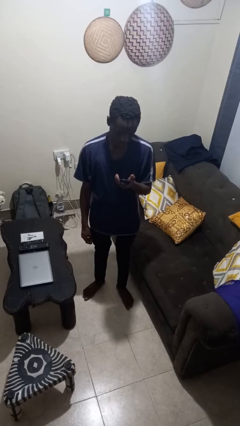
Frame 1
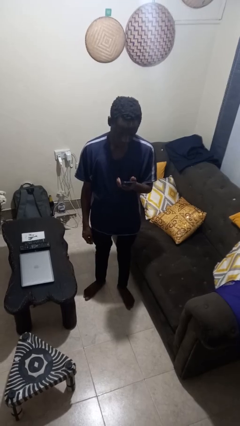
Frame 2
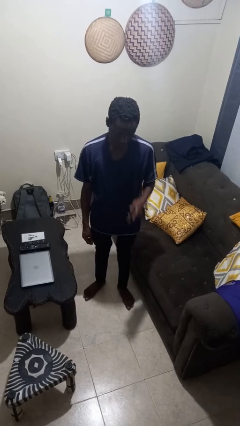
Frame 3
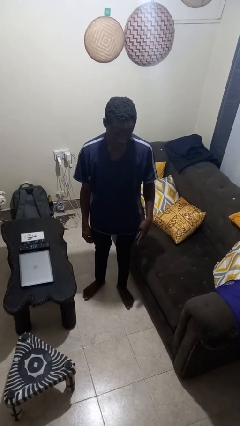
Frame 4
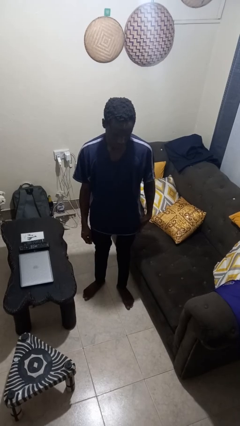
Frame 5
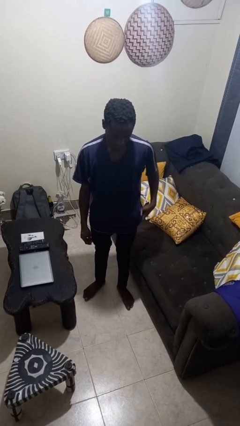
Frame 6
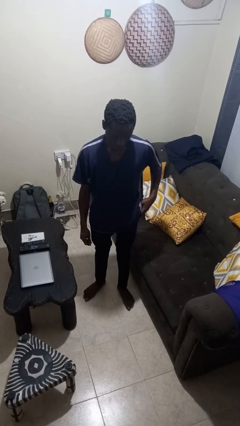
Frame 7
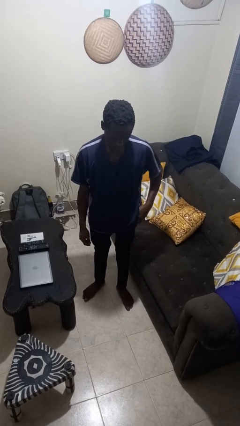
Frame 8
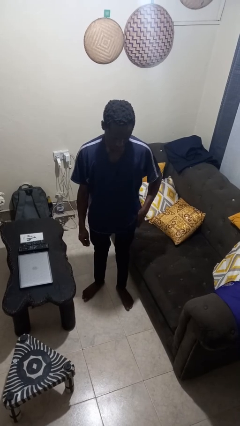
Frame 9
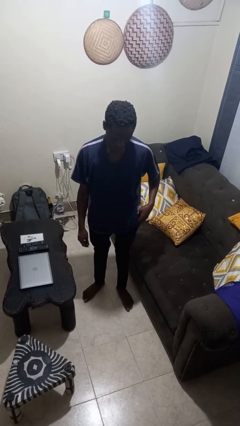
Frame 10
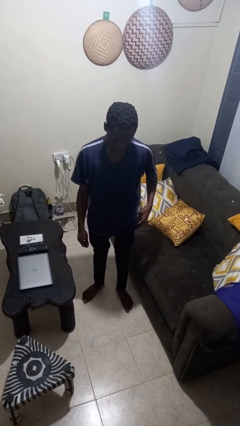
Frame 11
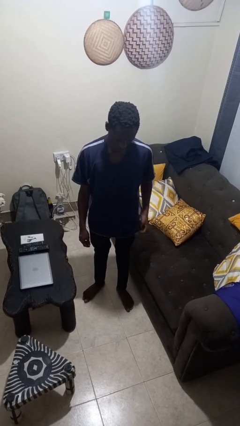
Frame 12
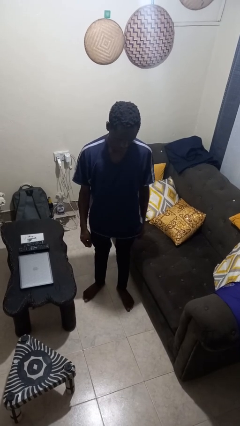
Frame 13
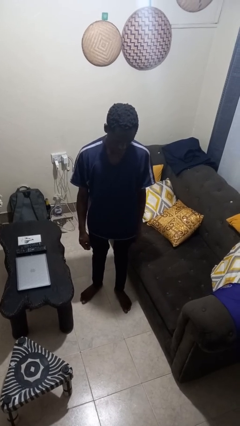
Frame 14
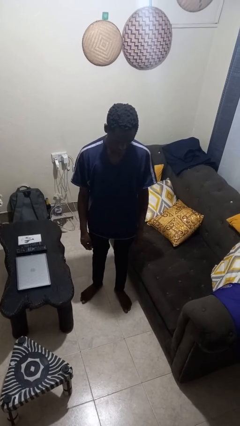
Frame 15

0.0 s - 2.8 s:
person puts phone into pocket

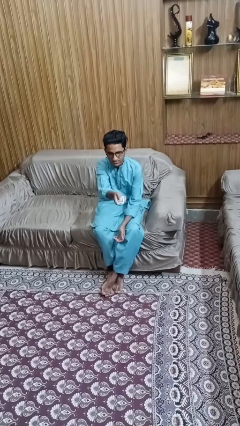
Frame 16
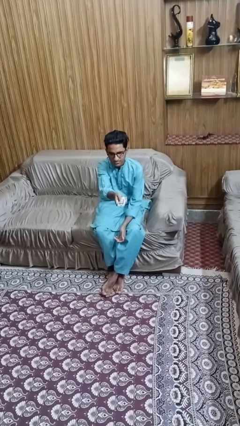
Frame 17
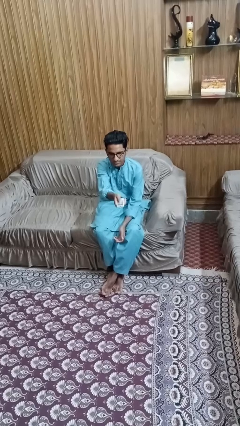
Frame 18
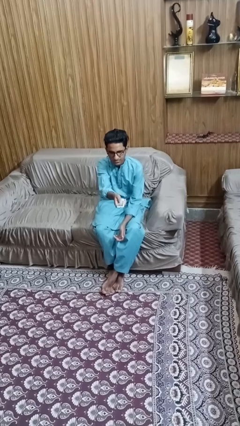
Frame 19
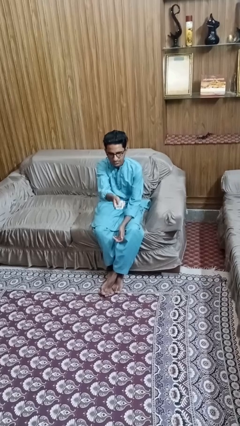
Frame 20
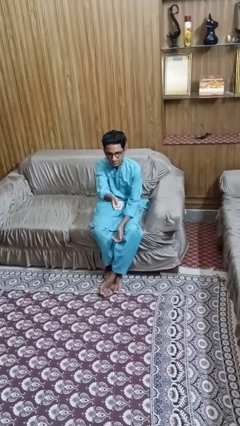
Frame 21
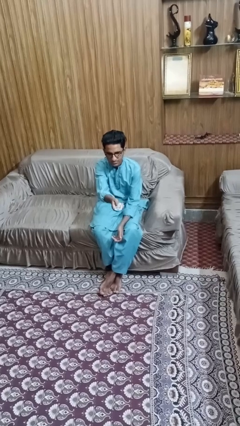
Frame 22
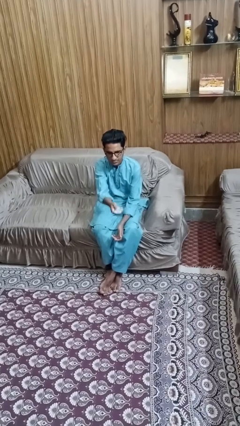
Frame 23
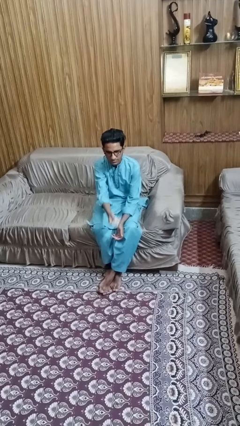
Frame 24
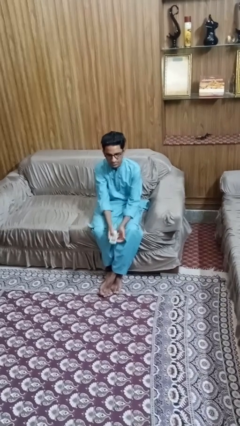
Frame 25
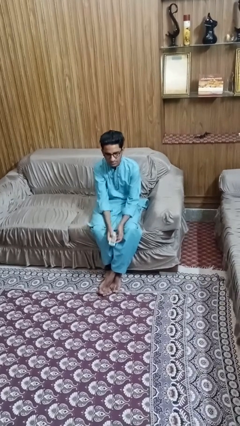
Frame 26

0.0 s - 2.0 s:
person uses television remote

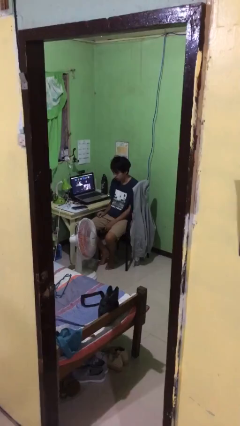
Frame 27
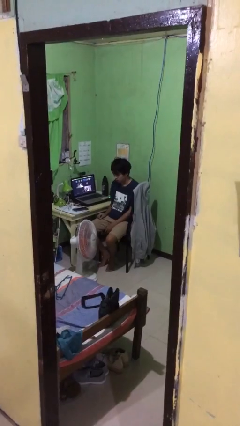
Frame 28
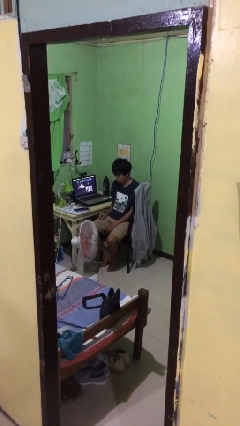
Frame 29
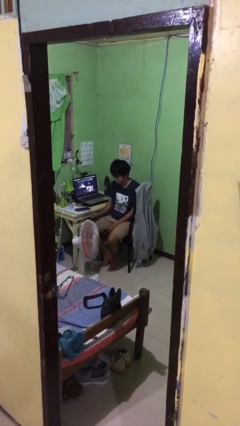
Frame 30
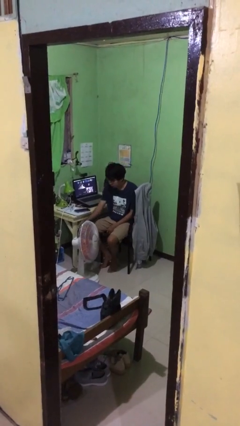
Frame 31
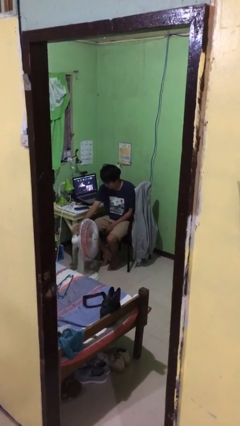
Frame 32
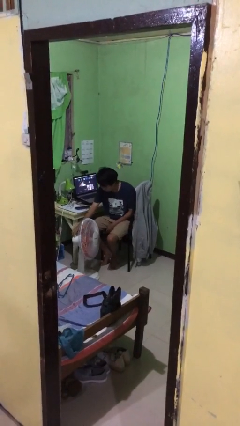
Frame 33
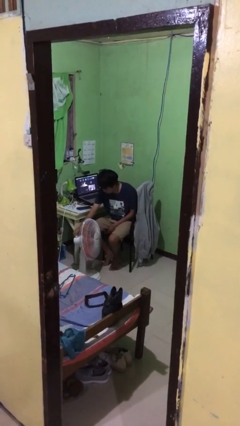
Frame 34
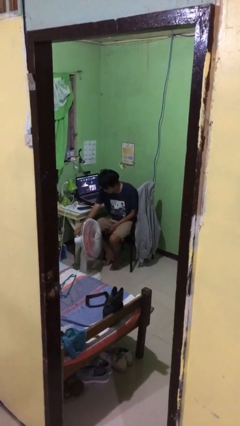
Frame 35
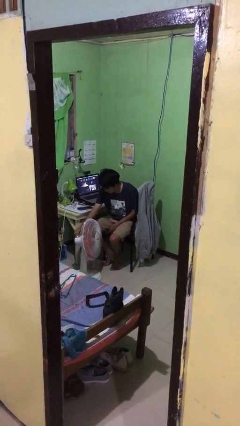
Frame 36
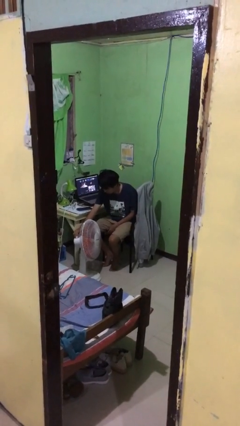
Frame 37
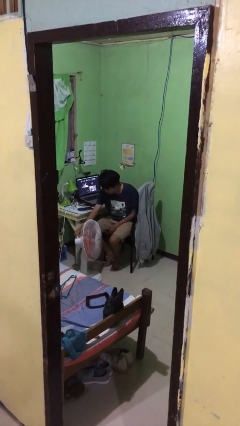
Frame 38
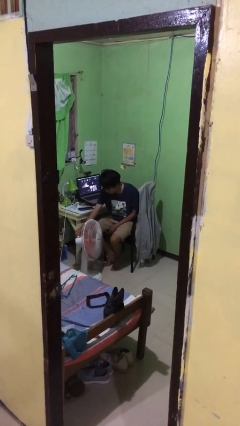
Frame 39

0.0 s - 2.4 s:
person turns on fan

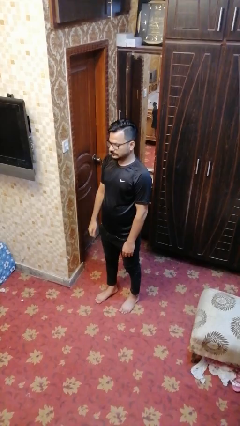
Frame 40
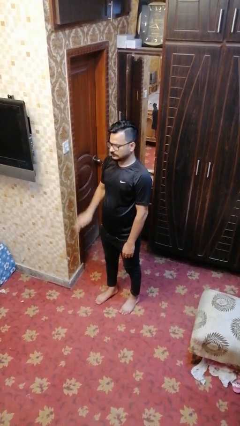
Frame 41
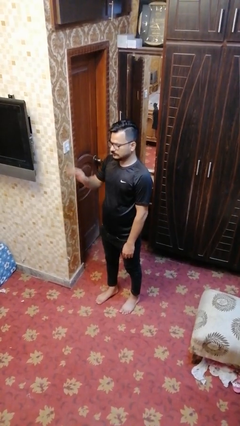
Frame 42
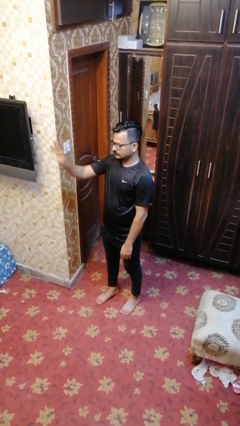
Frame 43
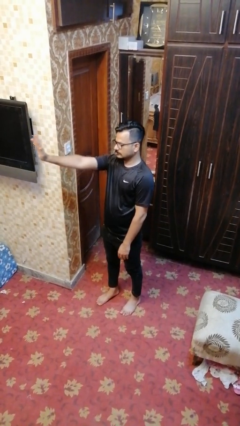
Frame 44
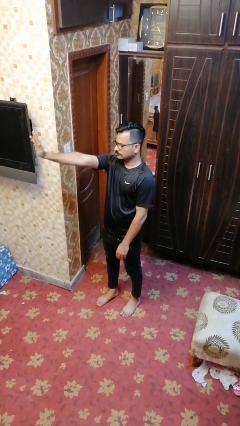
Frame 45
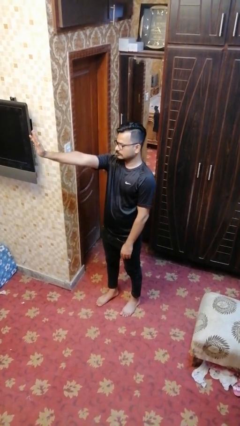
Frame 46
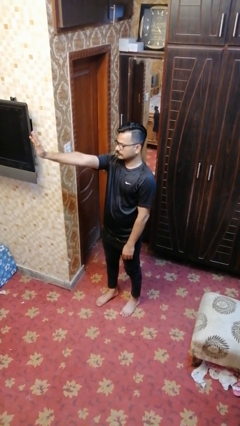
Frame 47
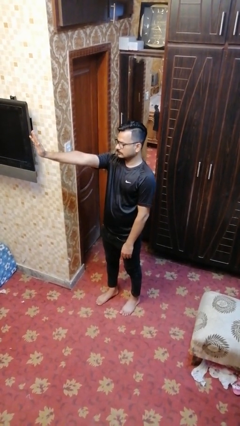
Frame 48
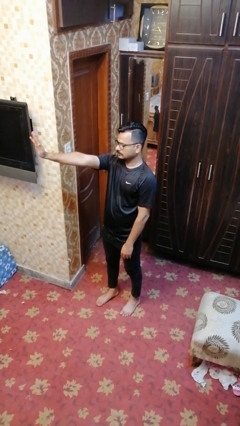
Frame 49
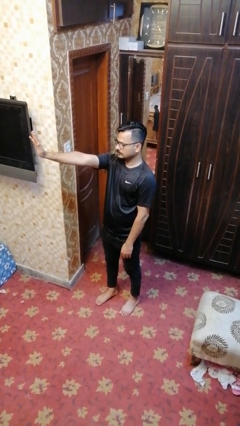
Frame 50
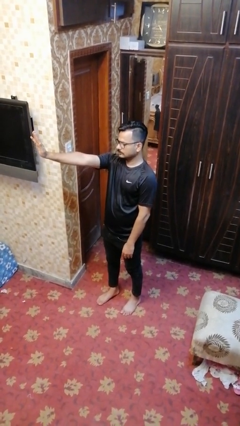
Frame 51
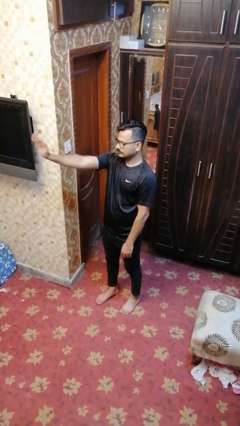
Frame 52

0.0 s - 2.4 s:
person gestures stop

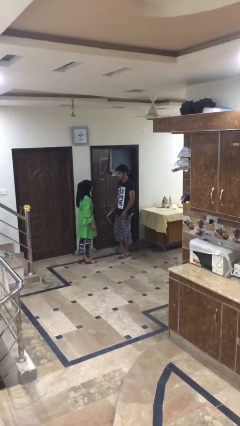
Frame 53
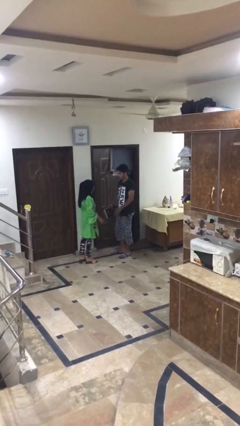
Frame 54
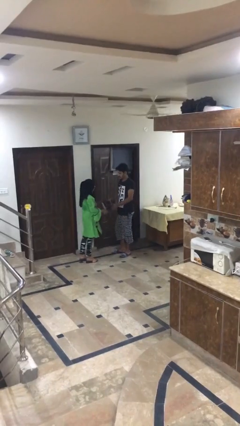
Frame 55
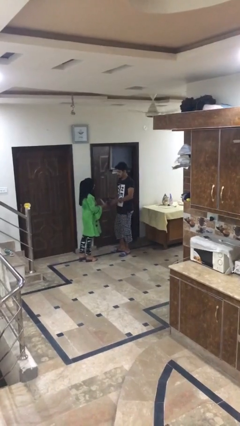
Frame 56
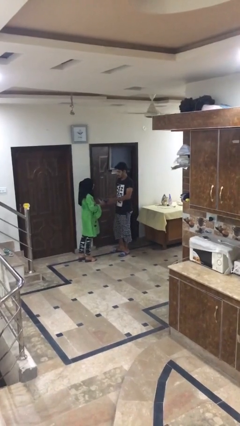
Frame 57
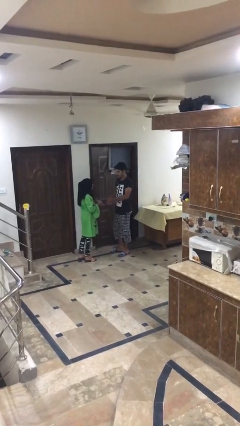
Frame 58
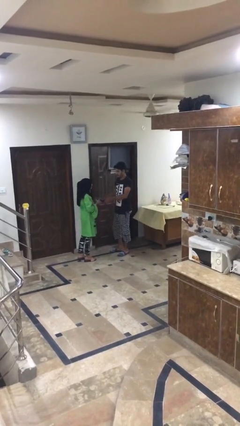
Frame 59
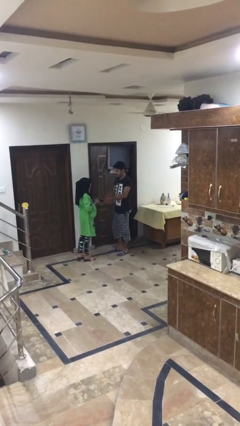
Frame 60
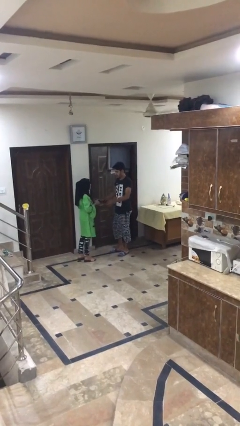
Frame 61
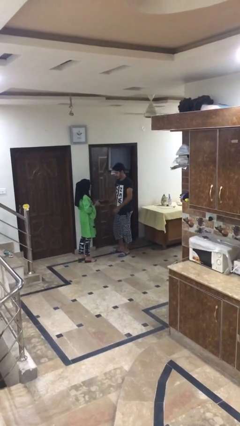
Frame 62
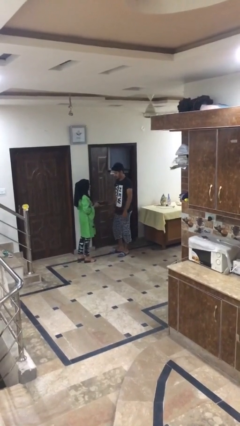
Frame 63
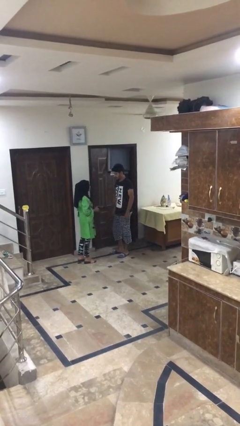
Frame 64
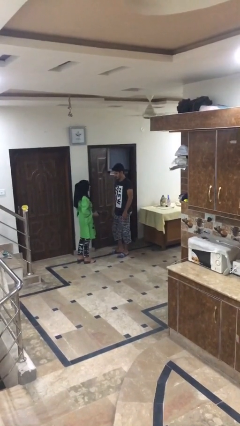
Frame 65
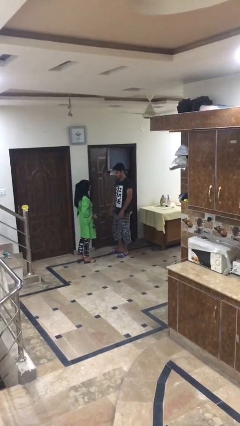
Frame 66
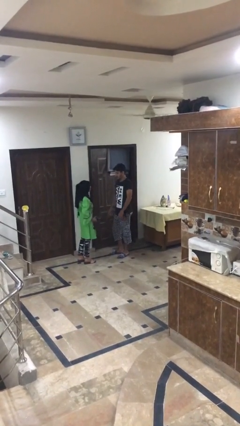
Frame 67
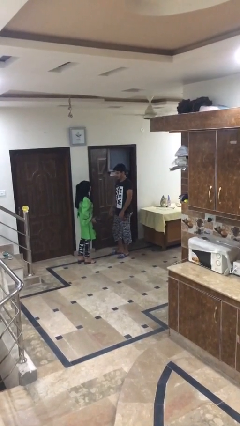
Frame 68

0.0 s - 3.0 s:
person transfers object to person

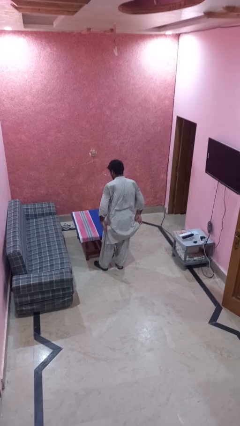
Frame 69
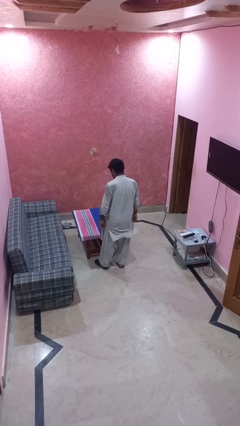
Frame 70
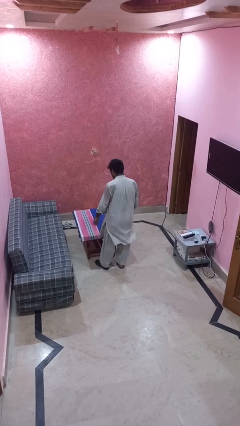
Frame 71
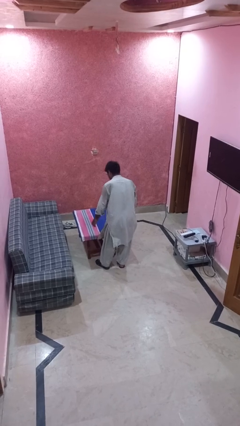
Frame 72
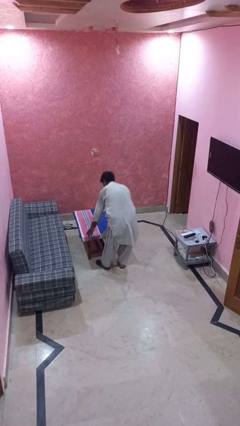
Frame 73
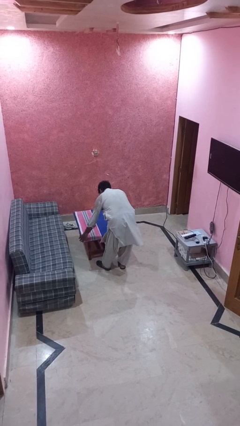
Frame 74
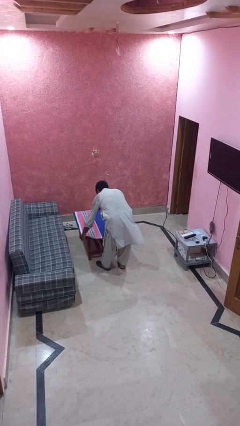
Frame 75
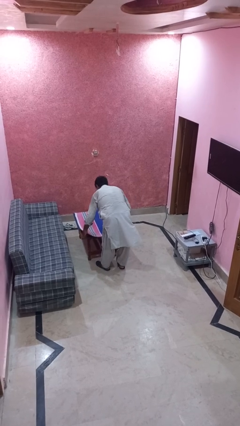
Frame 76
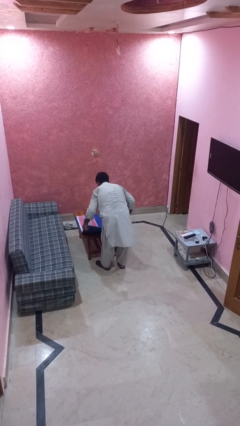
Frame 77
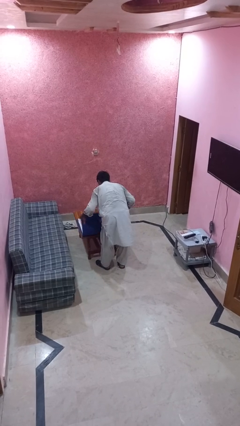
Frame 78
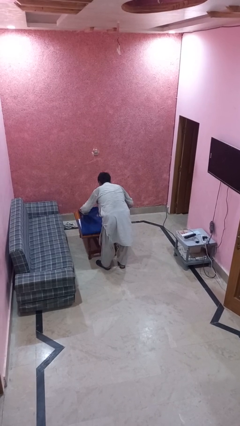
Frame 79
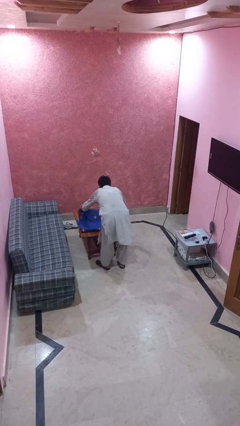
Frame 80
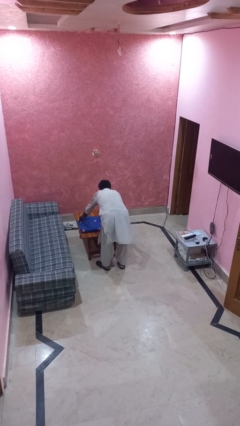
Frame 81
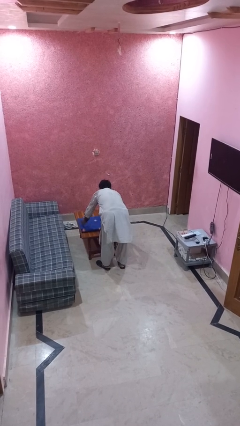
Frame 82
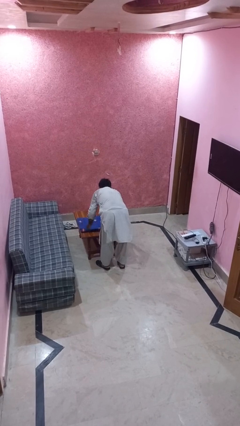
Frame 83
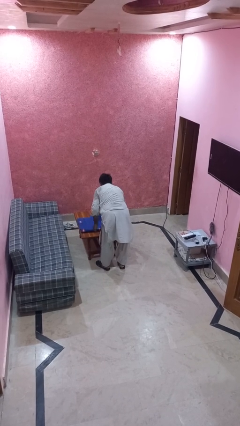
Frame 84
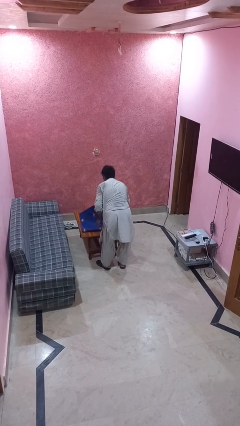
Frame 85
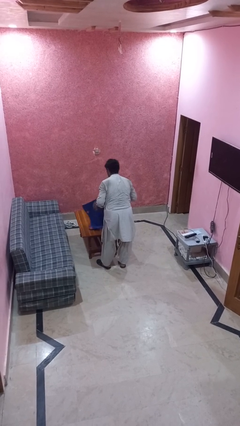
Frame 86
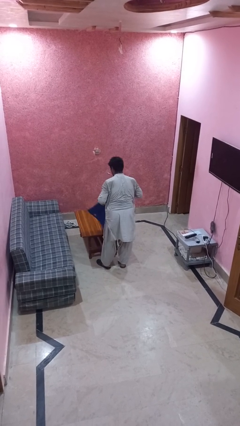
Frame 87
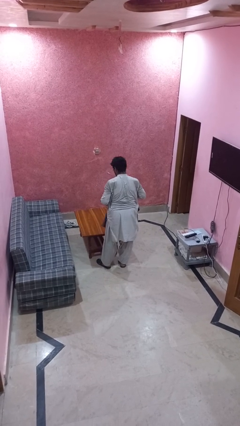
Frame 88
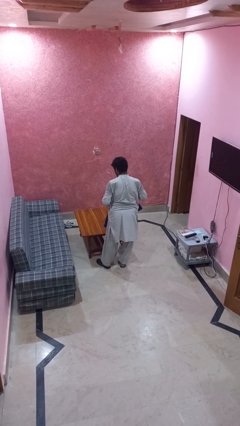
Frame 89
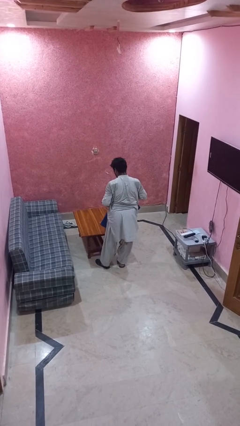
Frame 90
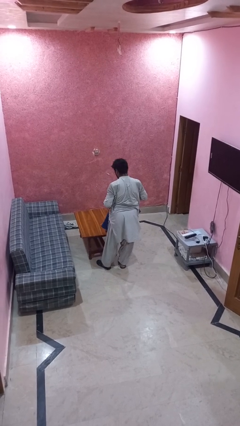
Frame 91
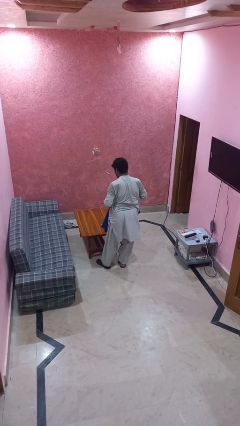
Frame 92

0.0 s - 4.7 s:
person folds tablecloth

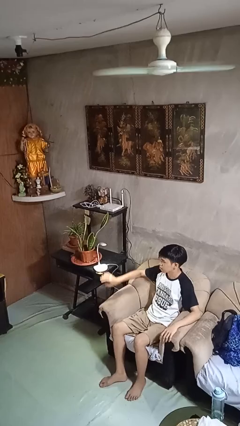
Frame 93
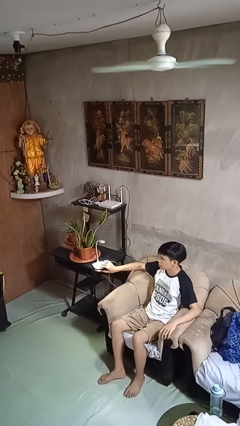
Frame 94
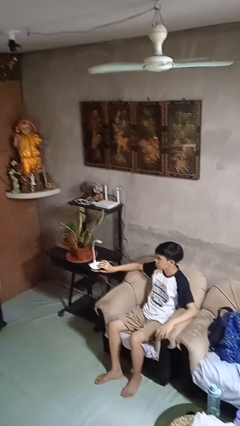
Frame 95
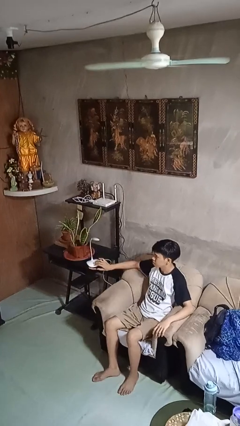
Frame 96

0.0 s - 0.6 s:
person turns off lamp
